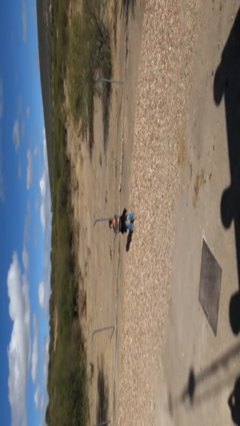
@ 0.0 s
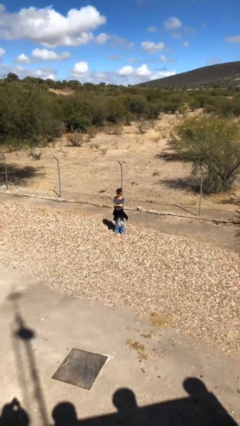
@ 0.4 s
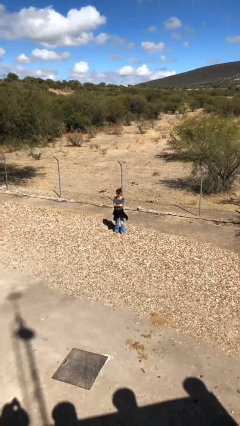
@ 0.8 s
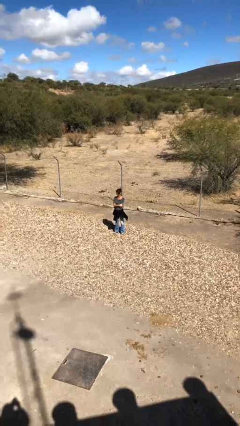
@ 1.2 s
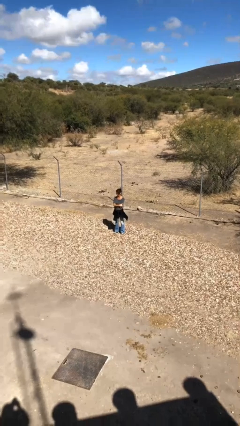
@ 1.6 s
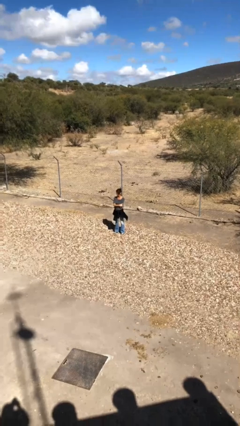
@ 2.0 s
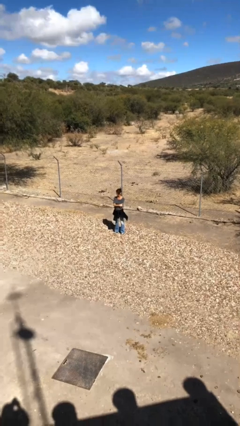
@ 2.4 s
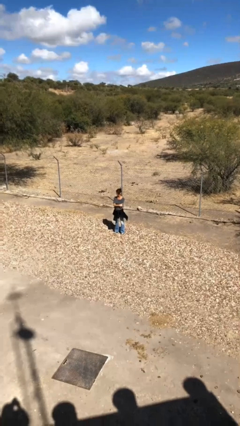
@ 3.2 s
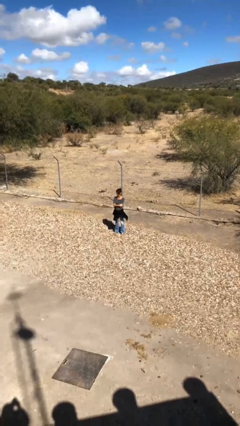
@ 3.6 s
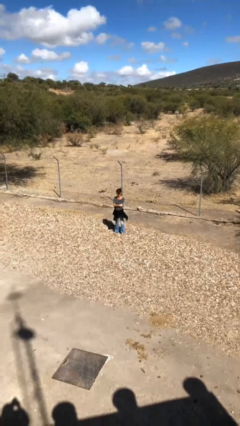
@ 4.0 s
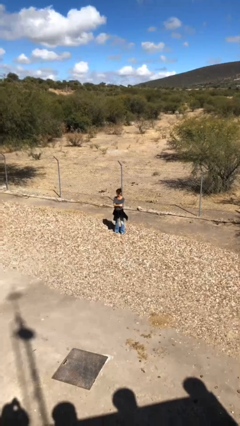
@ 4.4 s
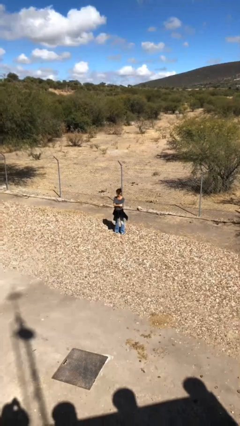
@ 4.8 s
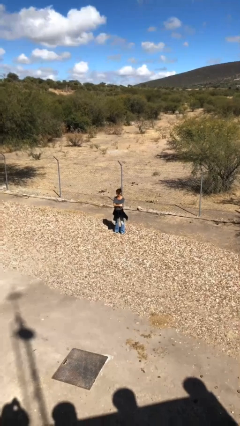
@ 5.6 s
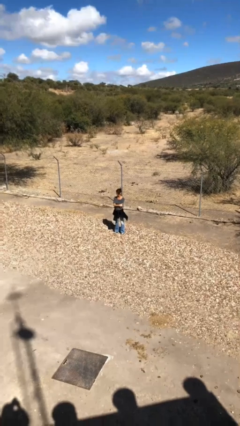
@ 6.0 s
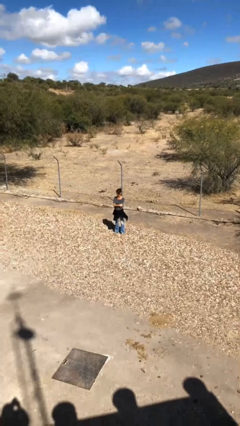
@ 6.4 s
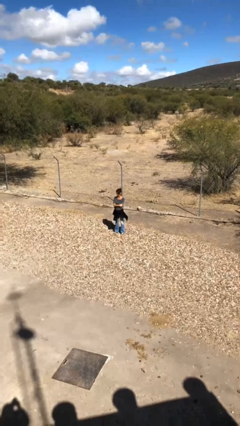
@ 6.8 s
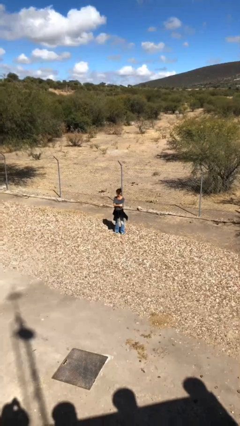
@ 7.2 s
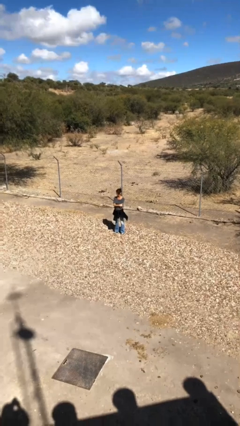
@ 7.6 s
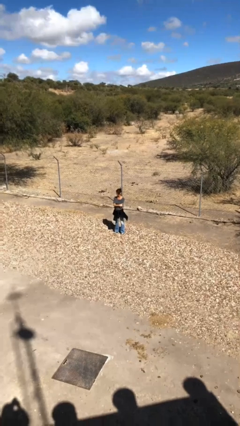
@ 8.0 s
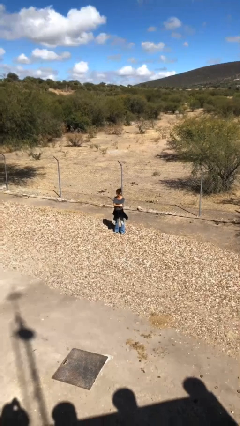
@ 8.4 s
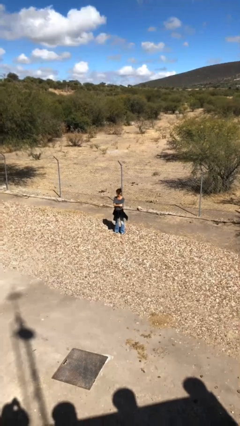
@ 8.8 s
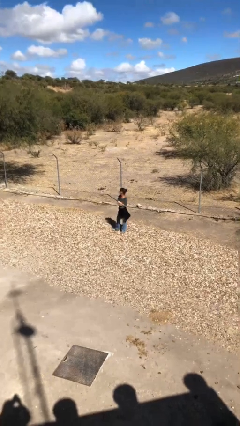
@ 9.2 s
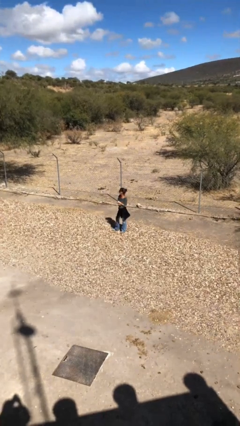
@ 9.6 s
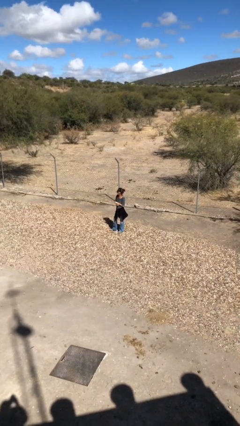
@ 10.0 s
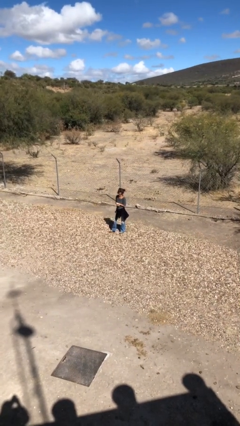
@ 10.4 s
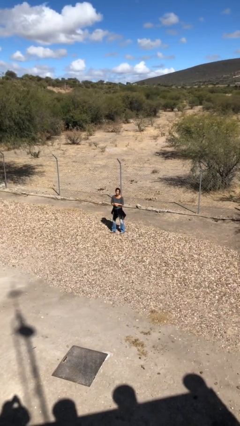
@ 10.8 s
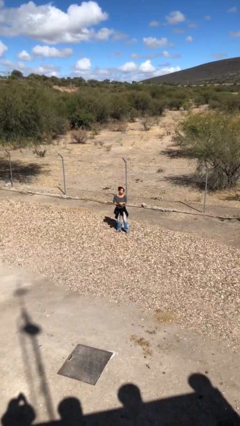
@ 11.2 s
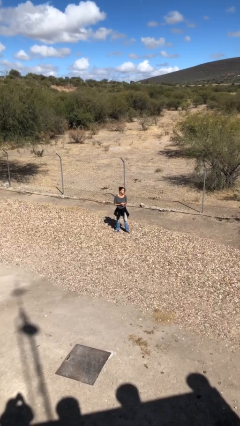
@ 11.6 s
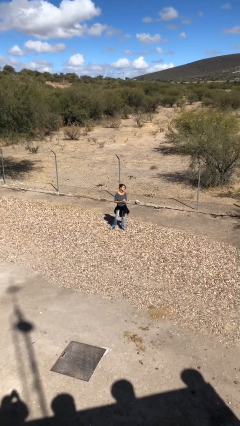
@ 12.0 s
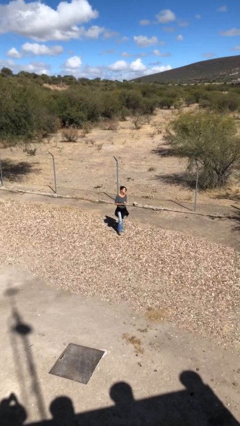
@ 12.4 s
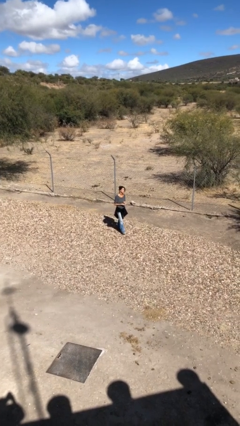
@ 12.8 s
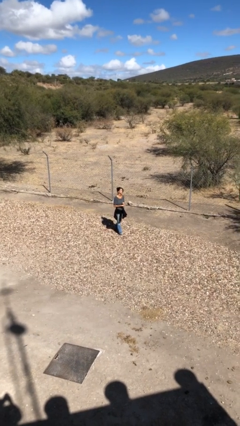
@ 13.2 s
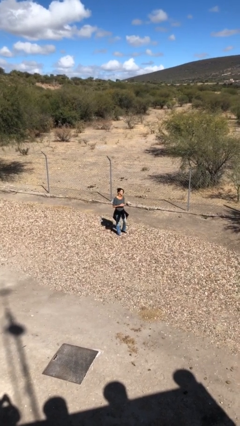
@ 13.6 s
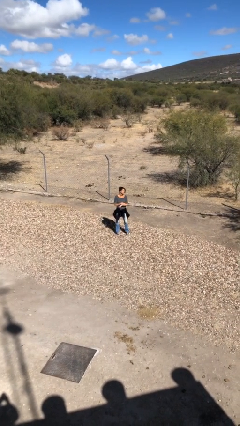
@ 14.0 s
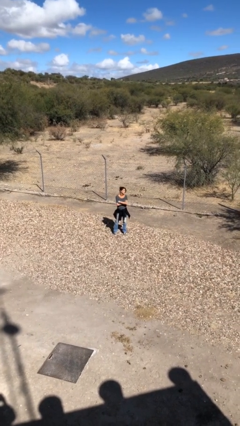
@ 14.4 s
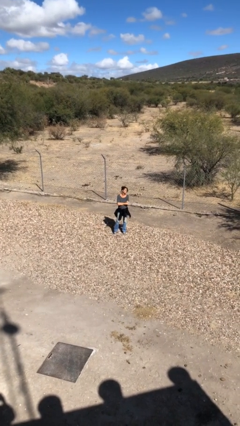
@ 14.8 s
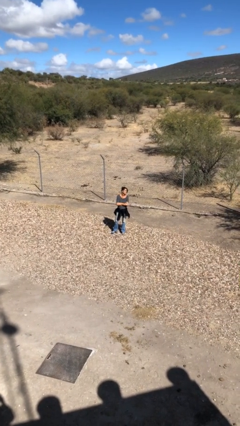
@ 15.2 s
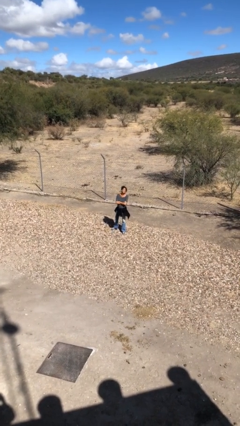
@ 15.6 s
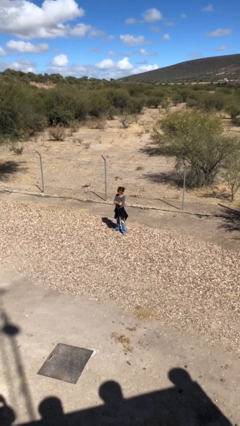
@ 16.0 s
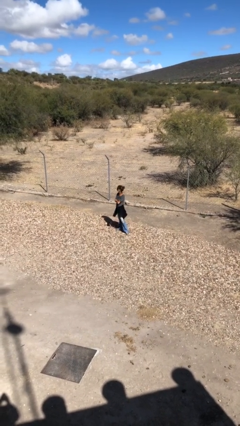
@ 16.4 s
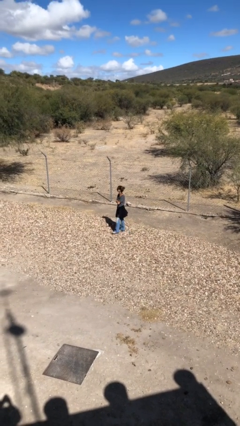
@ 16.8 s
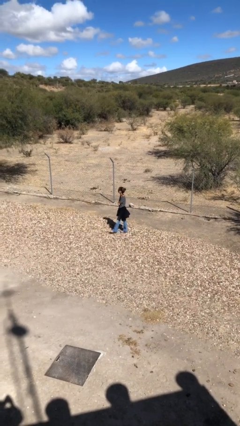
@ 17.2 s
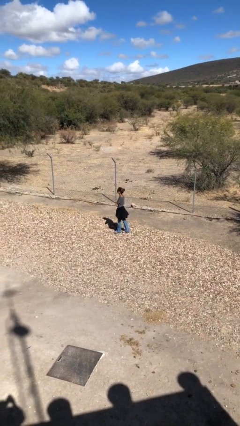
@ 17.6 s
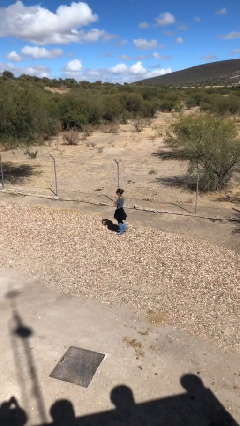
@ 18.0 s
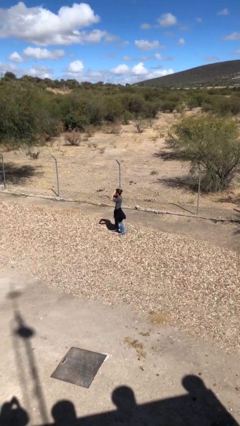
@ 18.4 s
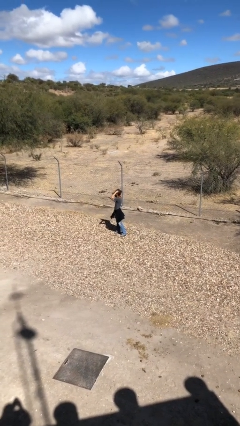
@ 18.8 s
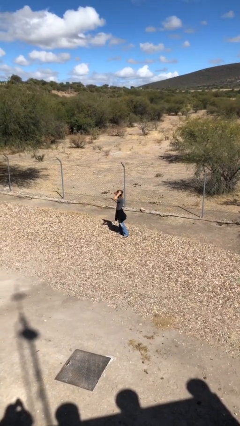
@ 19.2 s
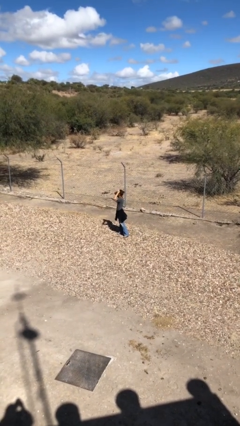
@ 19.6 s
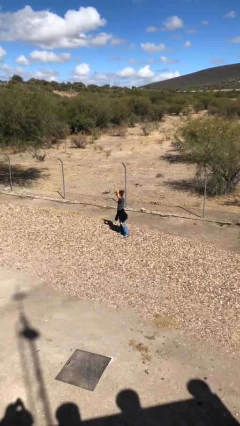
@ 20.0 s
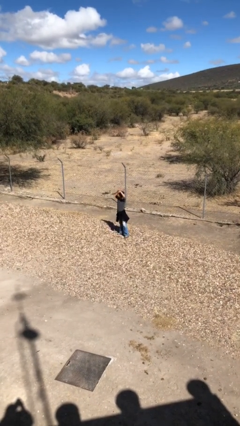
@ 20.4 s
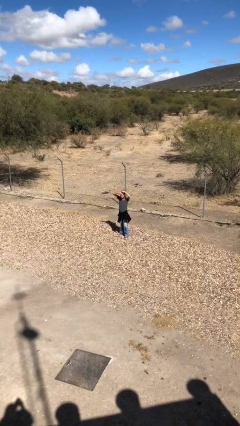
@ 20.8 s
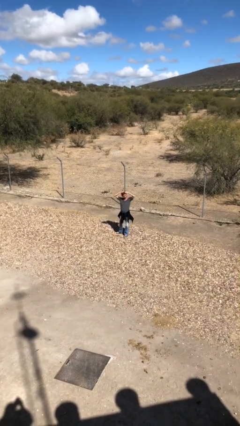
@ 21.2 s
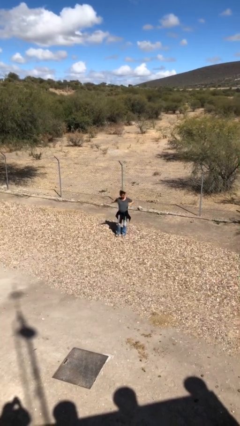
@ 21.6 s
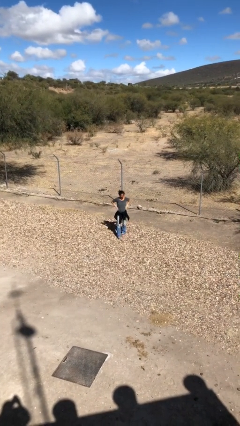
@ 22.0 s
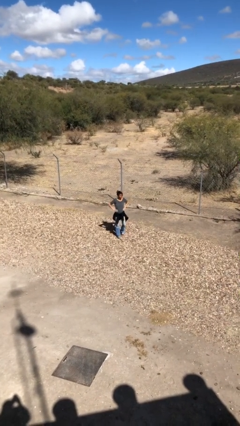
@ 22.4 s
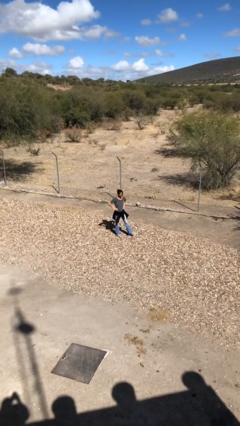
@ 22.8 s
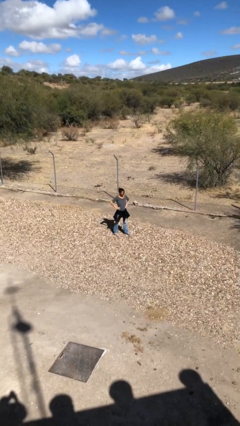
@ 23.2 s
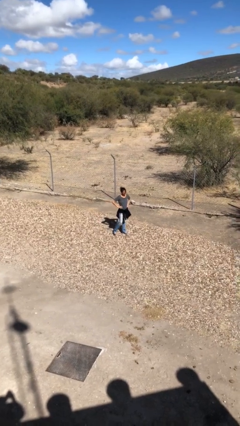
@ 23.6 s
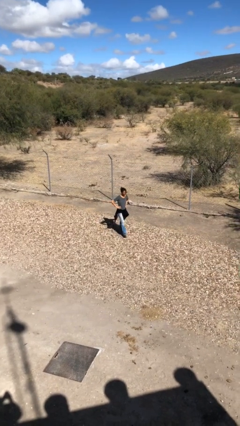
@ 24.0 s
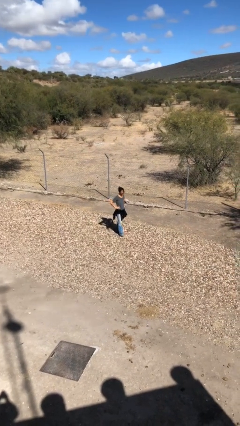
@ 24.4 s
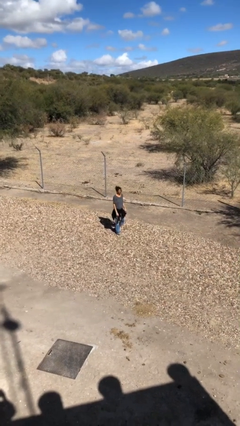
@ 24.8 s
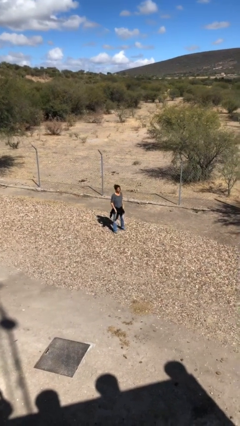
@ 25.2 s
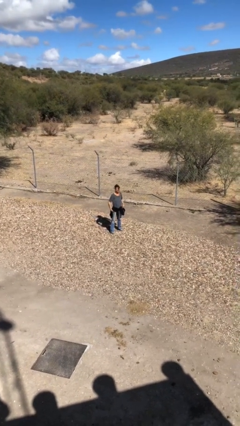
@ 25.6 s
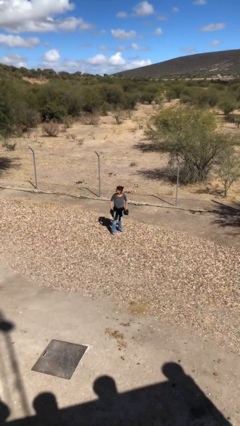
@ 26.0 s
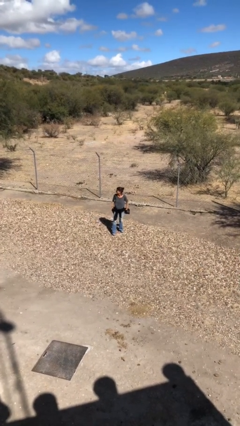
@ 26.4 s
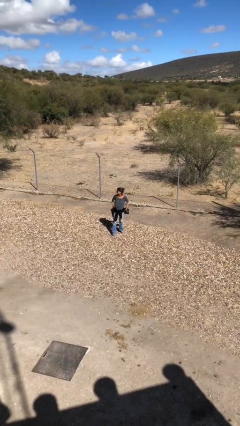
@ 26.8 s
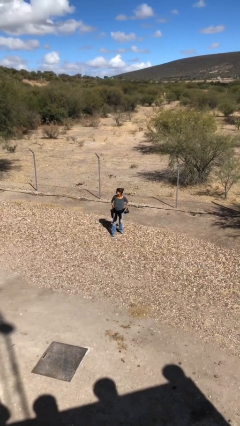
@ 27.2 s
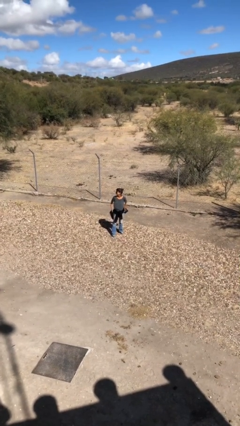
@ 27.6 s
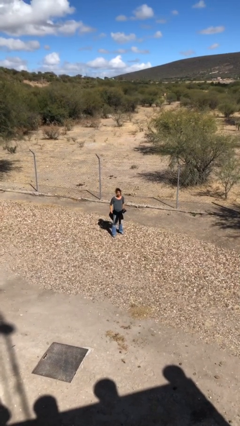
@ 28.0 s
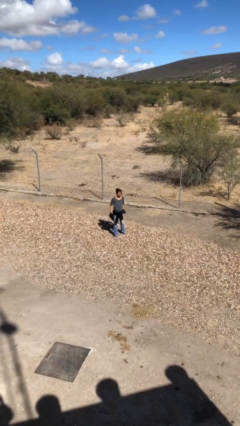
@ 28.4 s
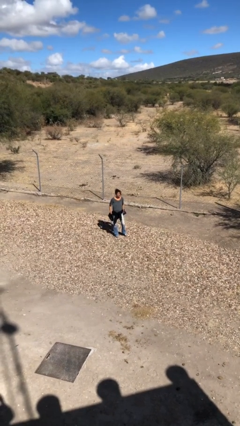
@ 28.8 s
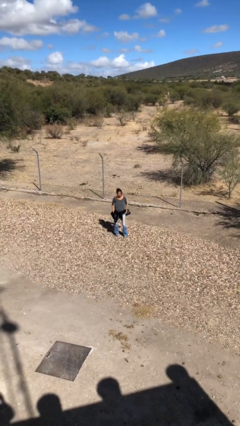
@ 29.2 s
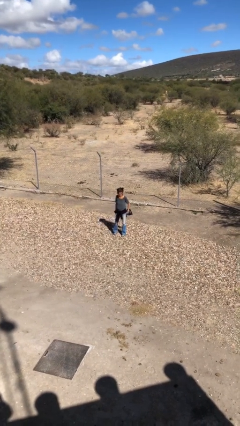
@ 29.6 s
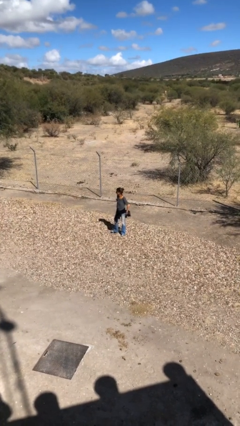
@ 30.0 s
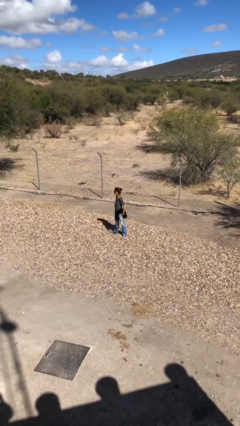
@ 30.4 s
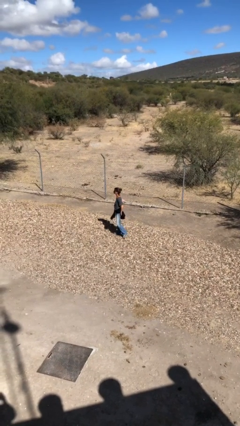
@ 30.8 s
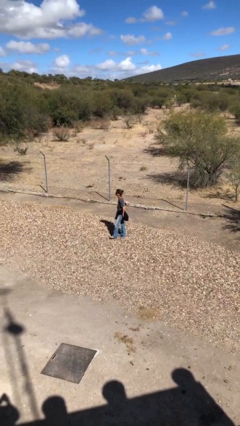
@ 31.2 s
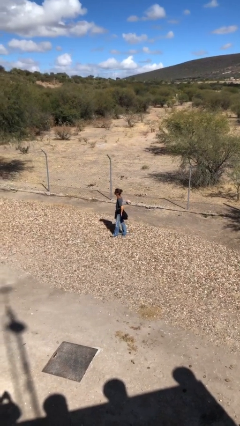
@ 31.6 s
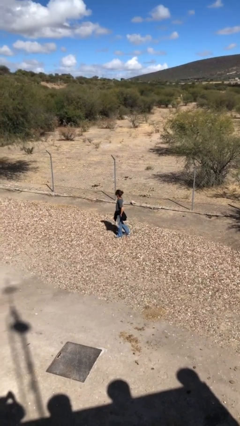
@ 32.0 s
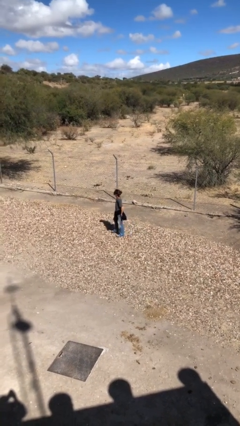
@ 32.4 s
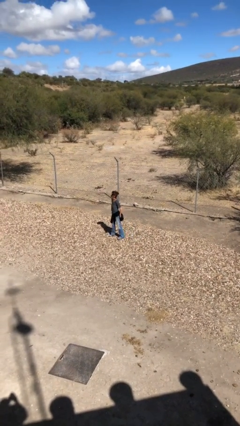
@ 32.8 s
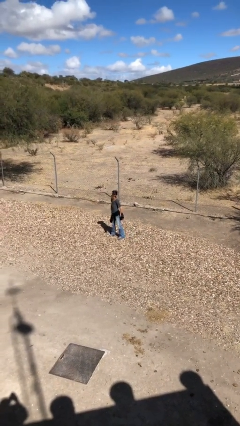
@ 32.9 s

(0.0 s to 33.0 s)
person walks

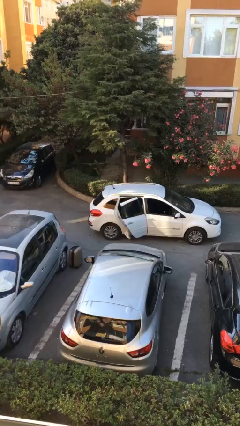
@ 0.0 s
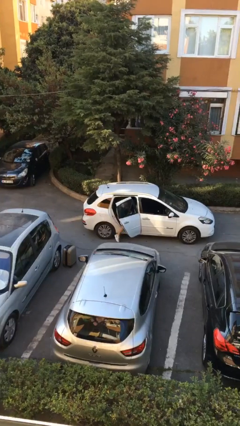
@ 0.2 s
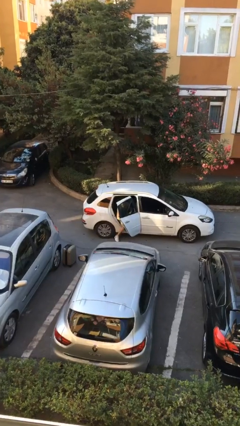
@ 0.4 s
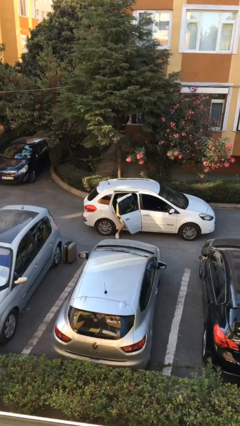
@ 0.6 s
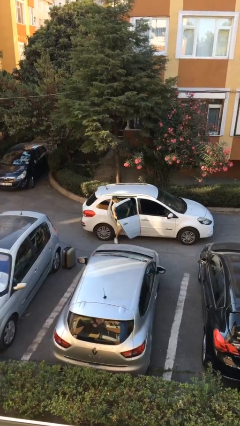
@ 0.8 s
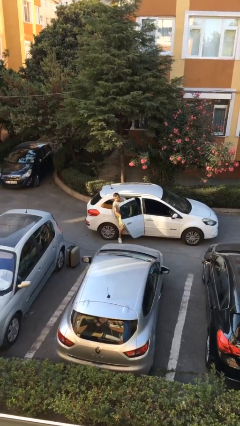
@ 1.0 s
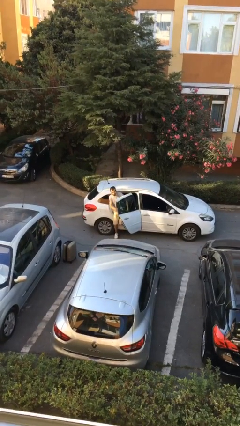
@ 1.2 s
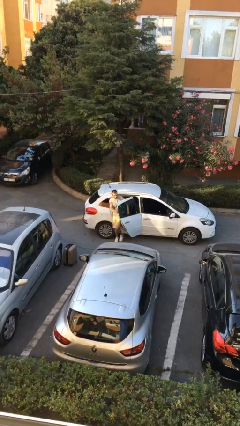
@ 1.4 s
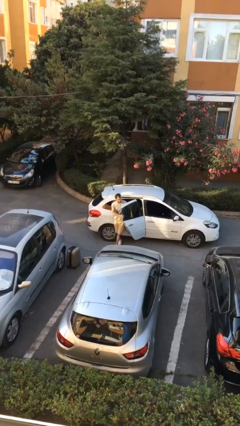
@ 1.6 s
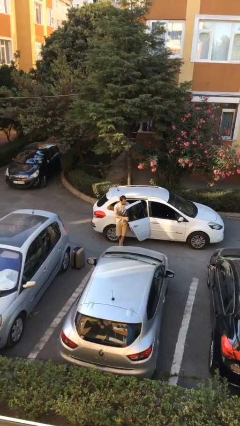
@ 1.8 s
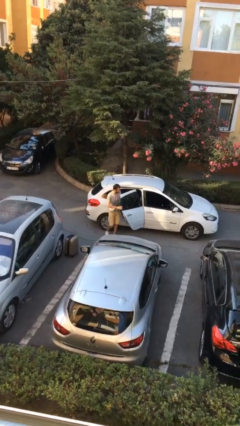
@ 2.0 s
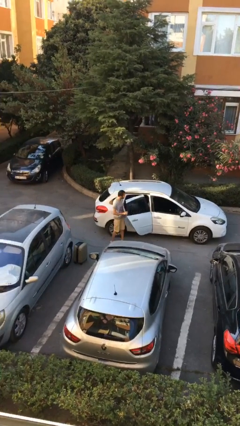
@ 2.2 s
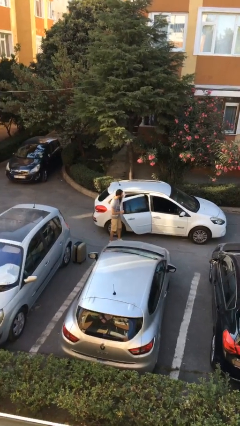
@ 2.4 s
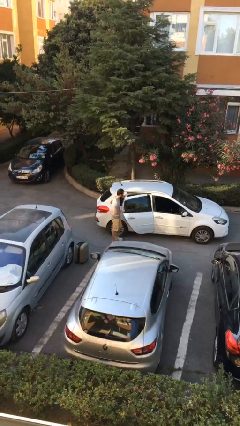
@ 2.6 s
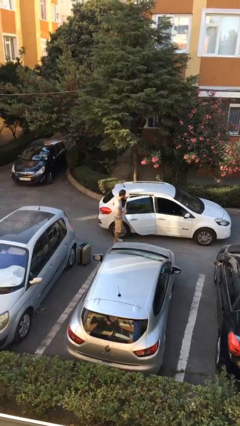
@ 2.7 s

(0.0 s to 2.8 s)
person exits car
